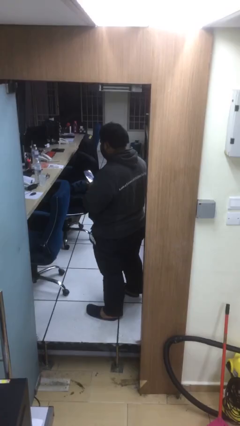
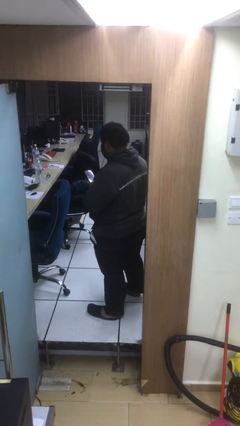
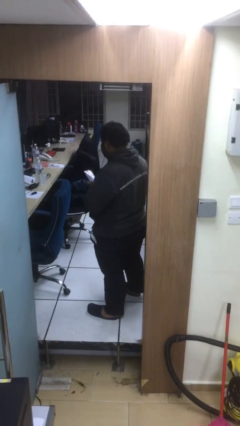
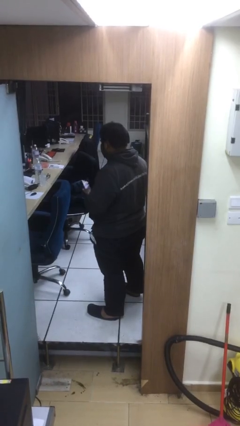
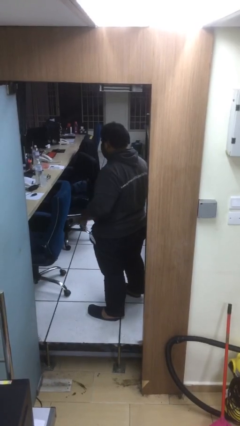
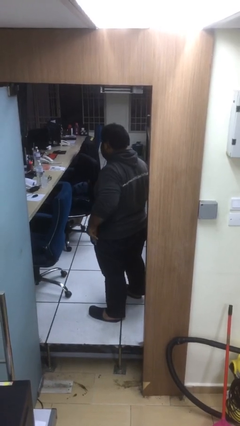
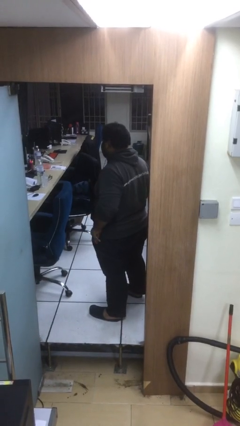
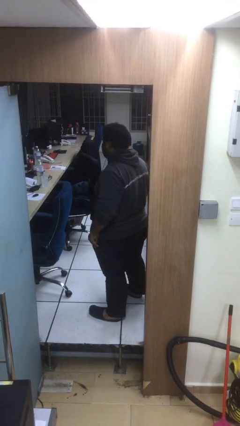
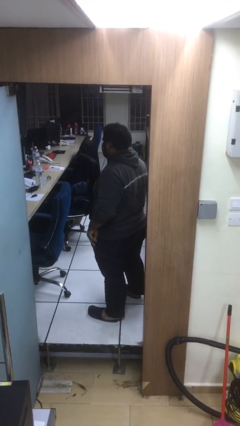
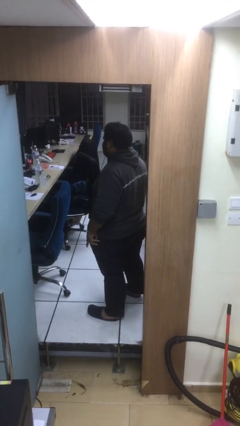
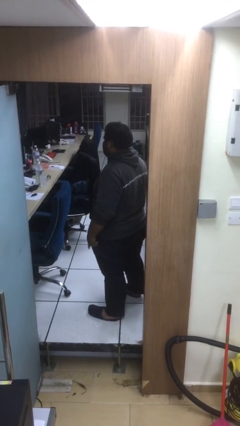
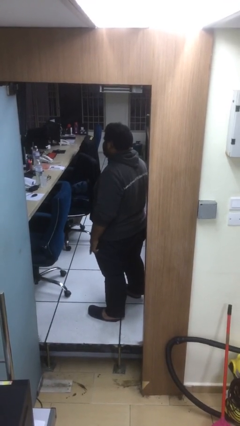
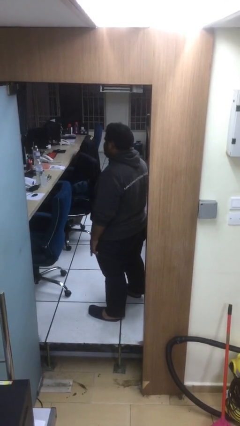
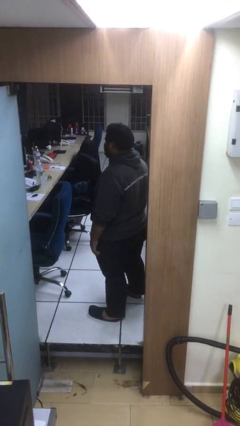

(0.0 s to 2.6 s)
person puts phone into pocket

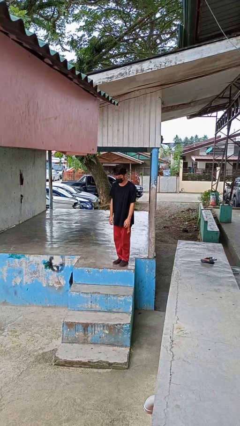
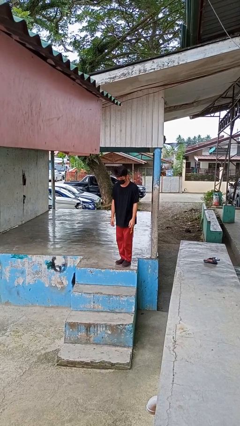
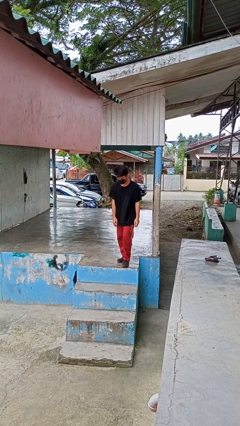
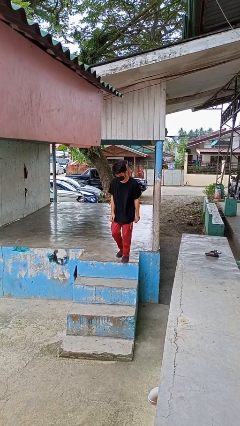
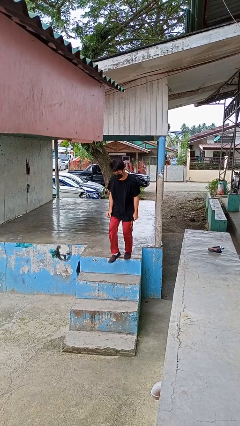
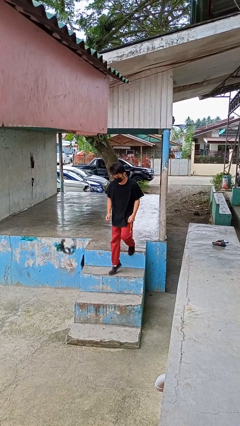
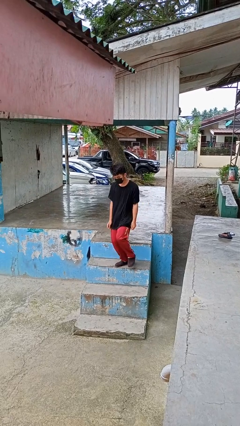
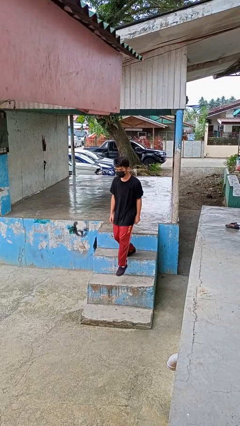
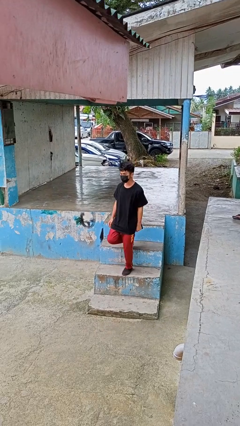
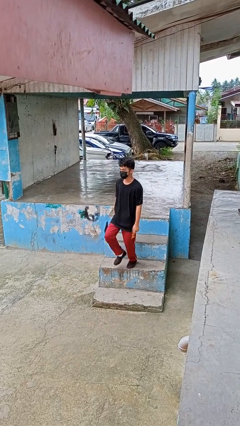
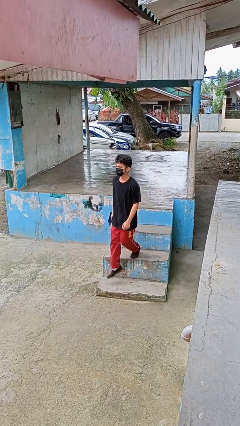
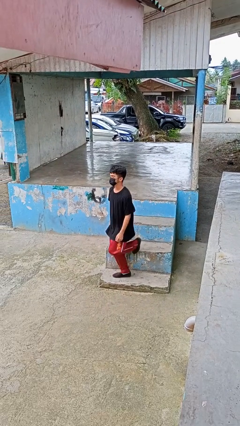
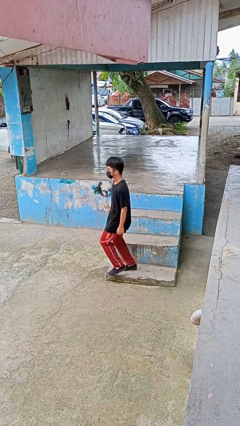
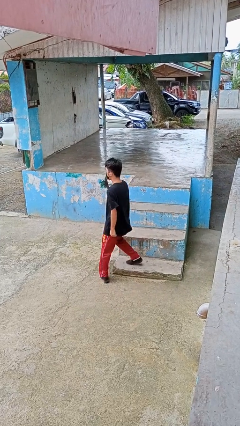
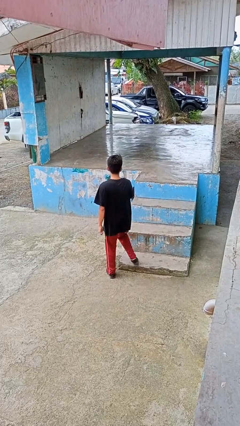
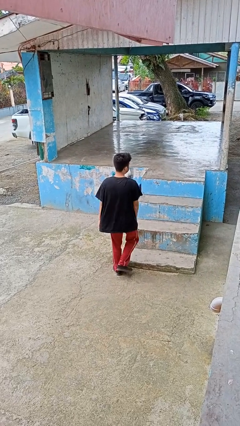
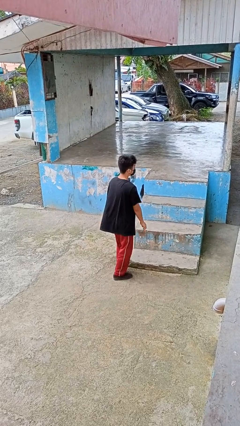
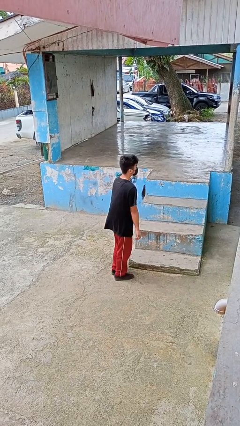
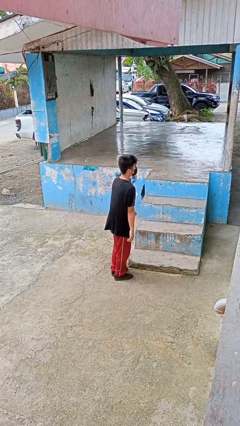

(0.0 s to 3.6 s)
person climbs down stairs

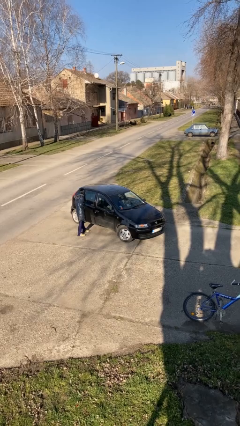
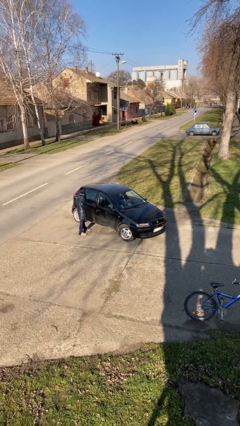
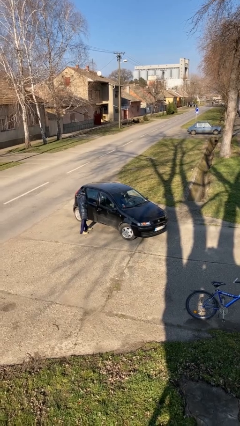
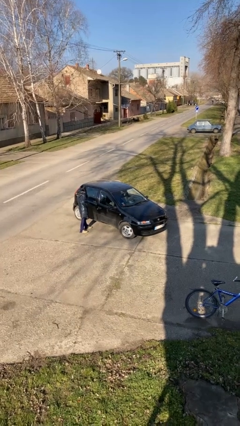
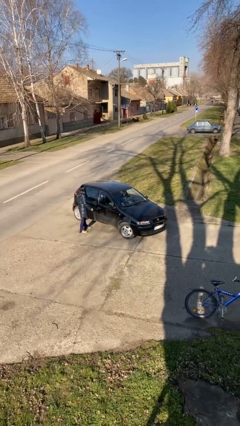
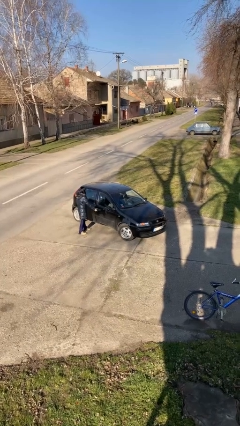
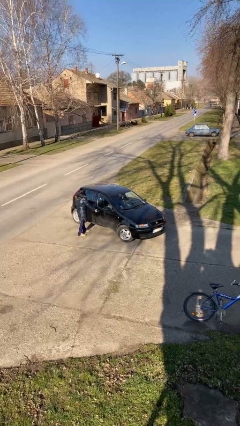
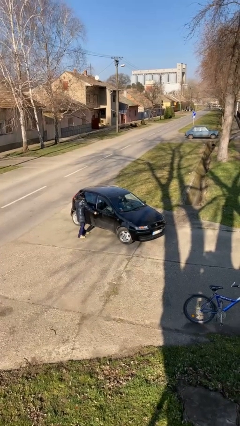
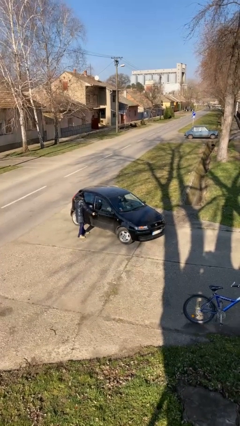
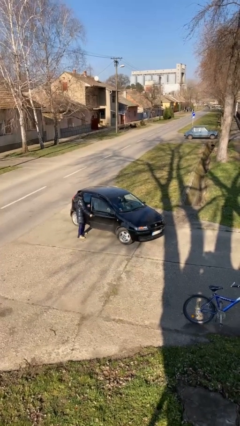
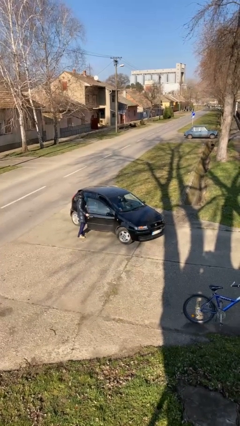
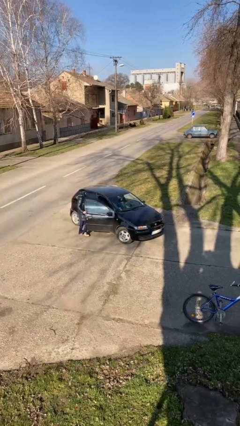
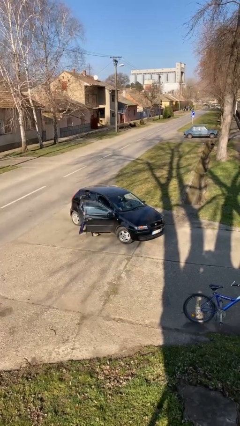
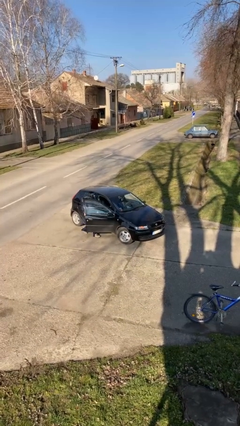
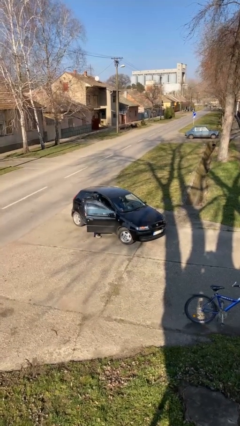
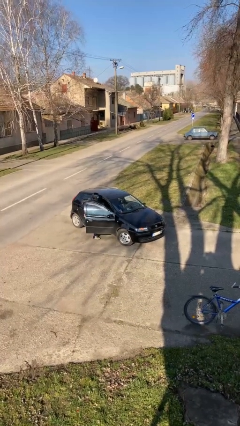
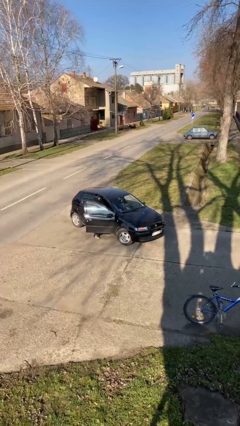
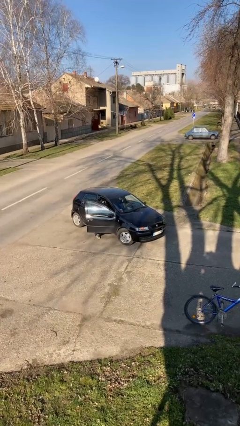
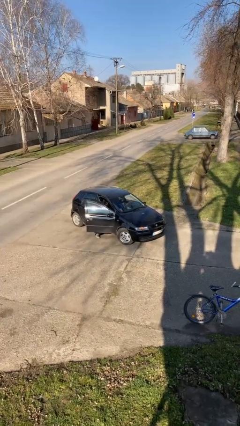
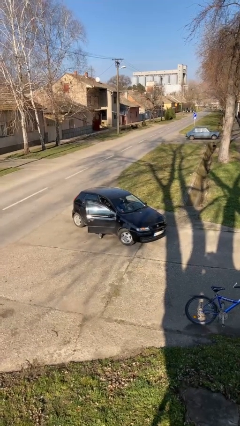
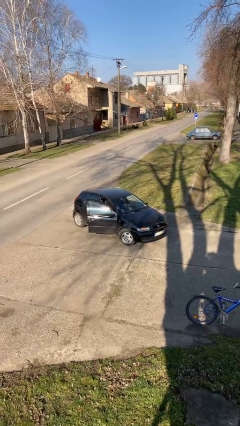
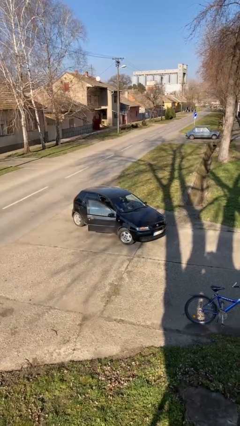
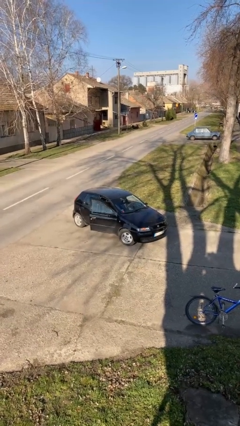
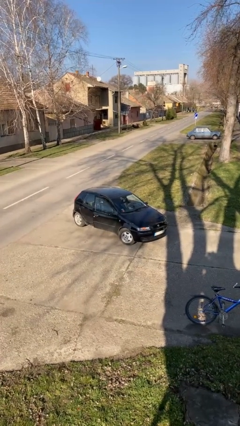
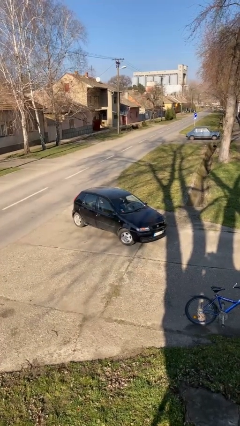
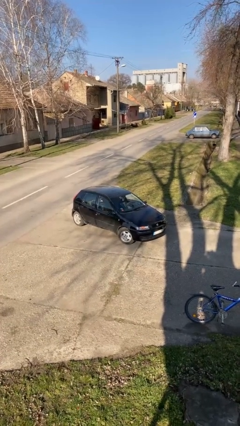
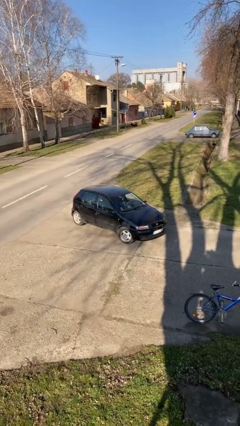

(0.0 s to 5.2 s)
car picks up person

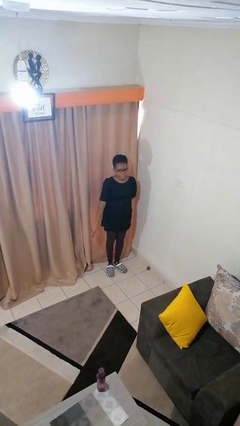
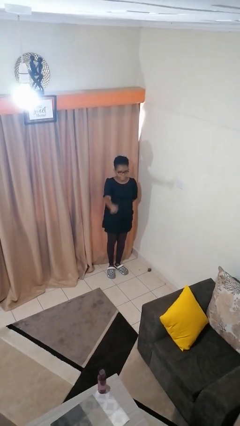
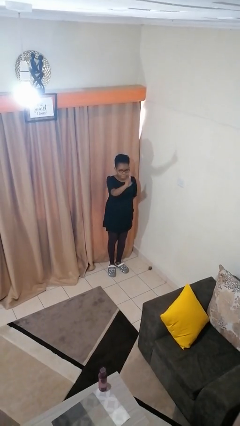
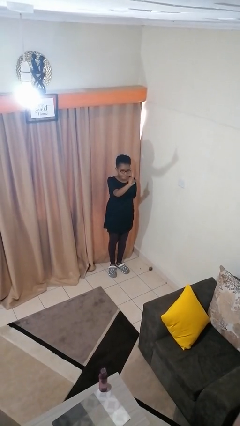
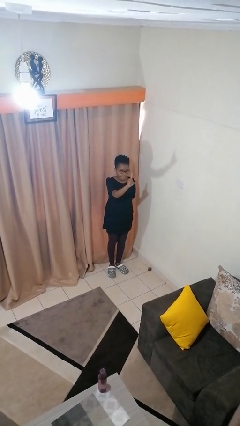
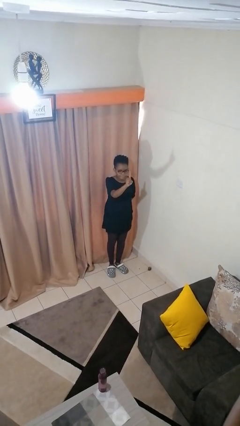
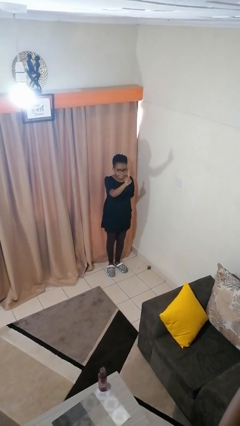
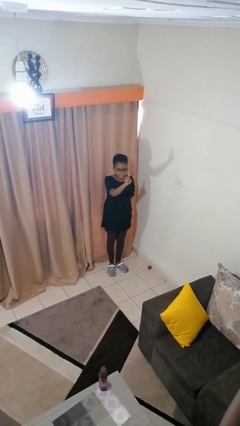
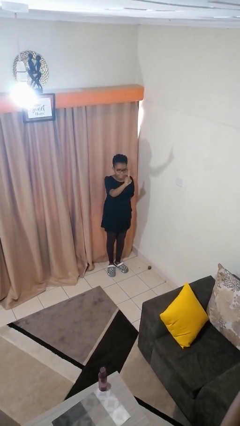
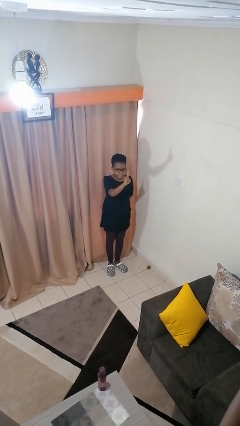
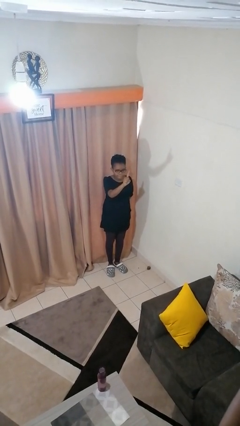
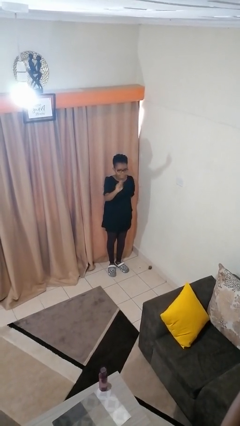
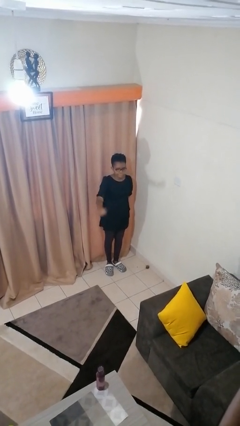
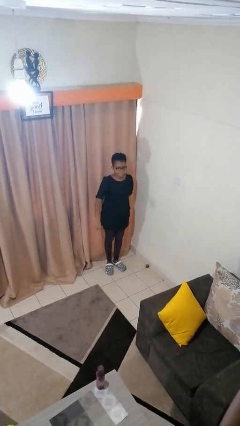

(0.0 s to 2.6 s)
person gestures number one

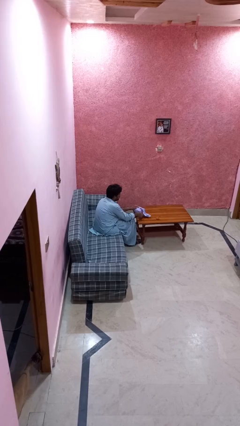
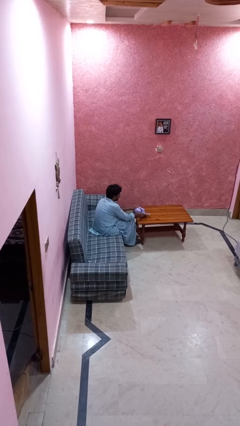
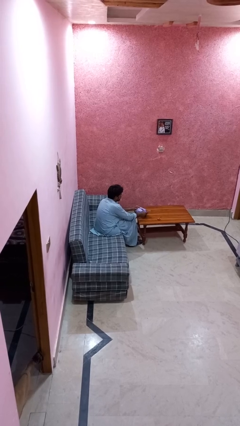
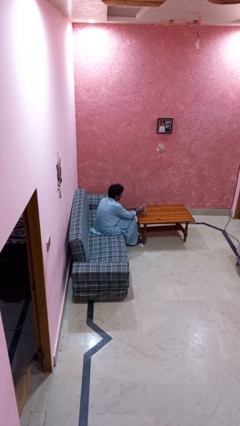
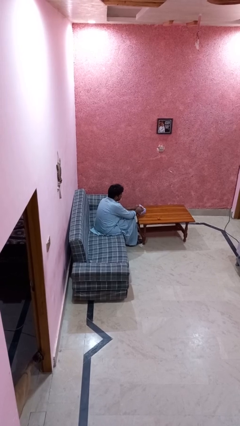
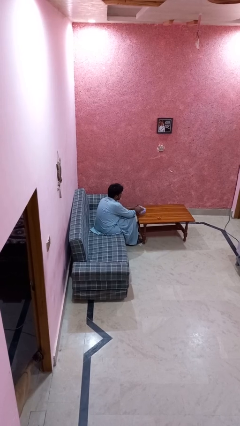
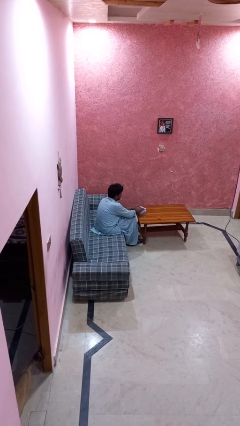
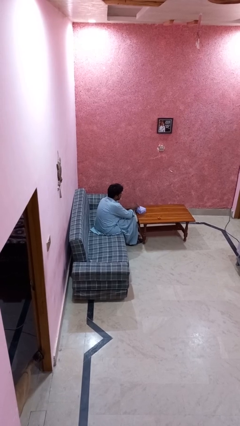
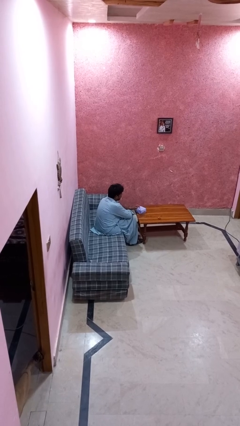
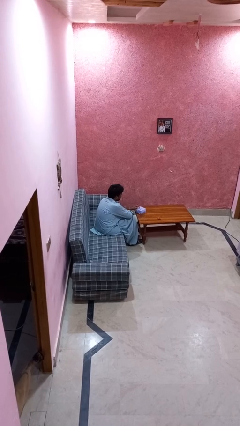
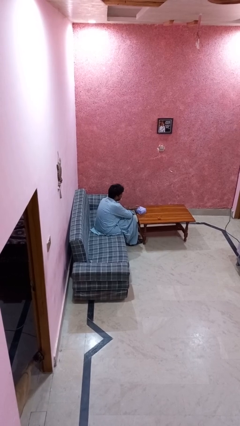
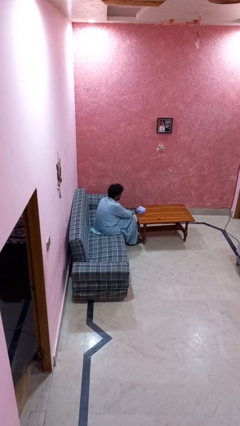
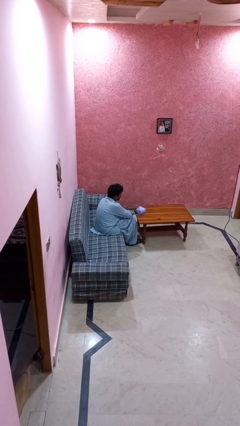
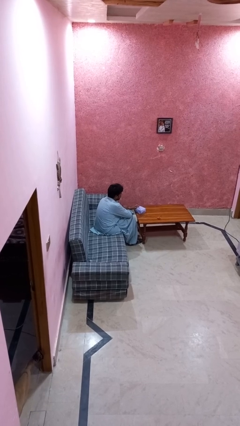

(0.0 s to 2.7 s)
person wraps box

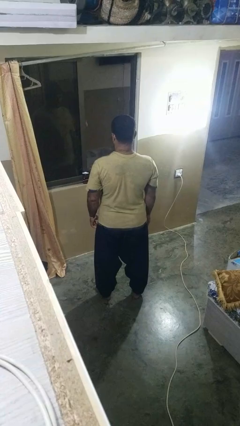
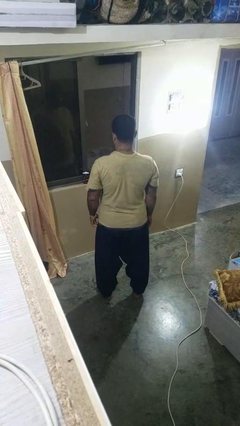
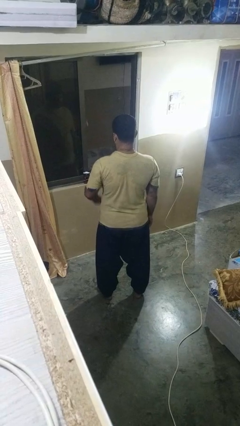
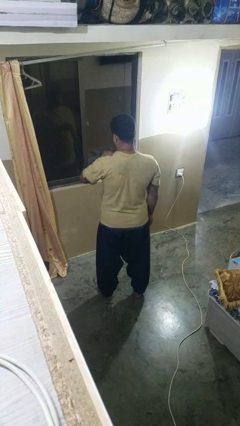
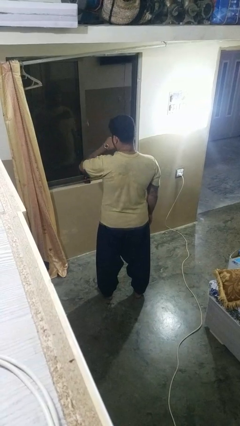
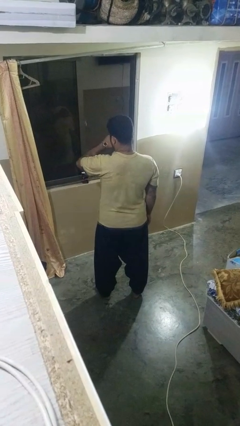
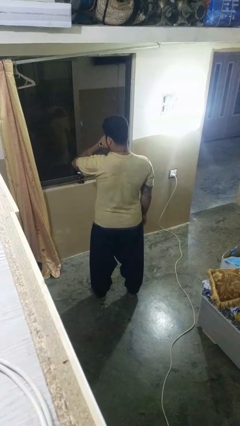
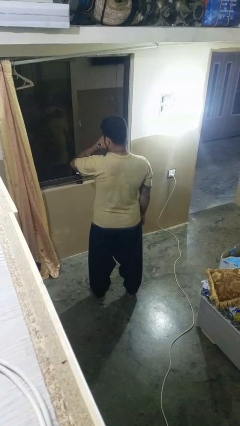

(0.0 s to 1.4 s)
person looks at wristwatch
